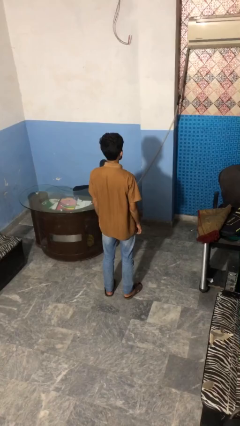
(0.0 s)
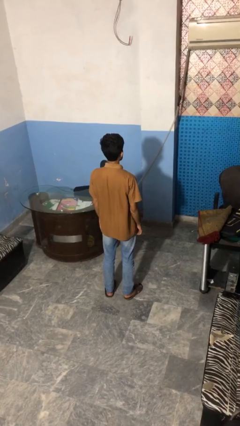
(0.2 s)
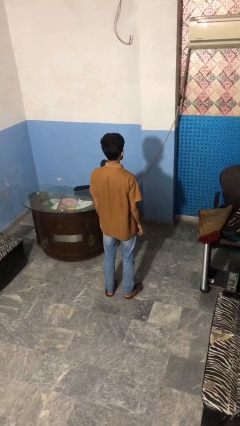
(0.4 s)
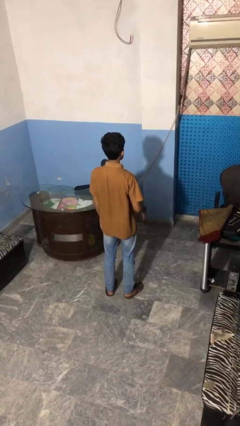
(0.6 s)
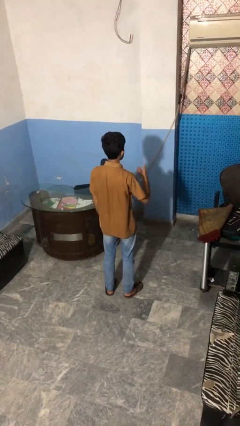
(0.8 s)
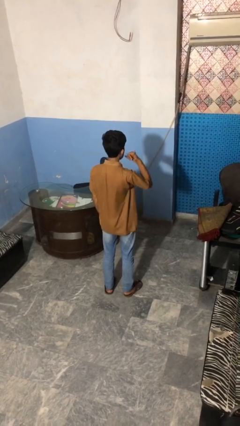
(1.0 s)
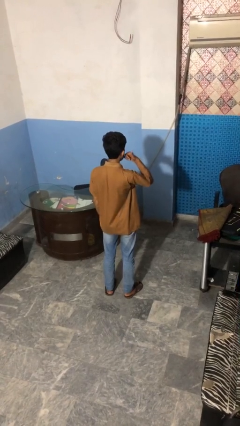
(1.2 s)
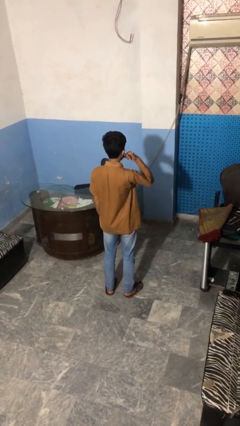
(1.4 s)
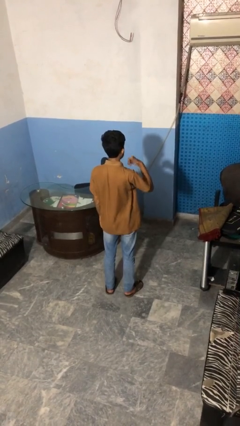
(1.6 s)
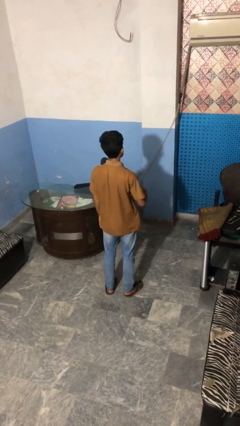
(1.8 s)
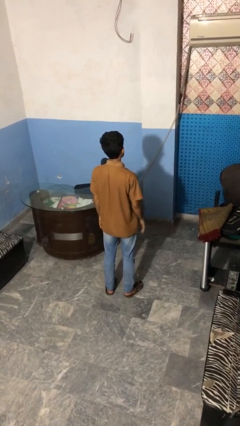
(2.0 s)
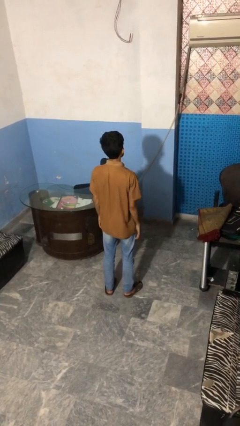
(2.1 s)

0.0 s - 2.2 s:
person gestures call me

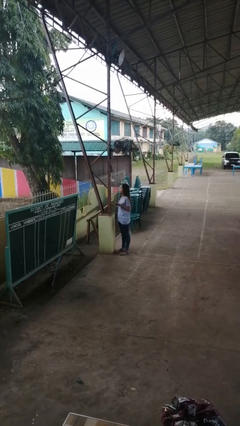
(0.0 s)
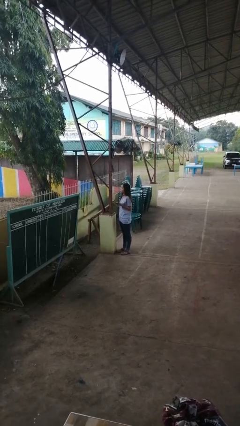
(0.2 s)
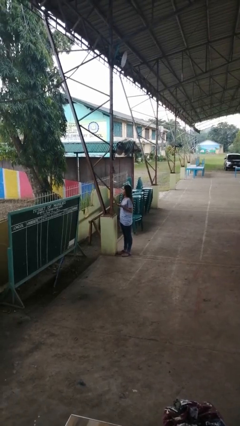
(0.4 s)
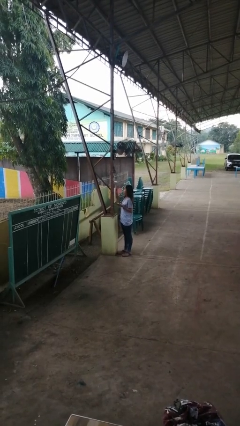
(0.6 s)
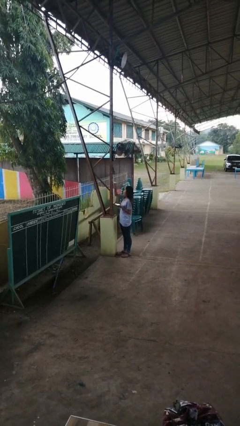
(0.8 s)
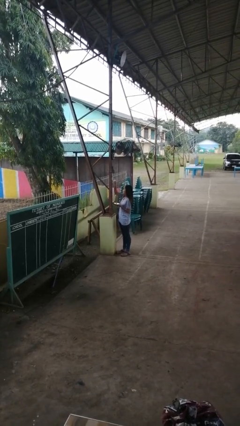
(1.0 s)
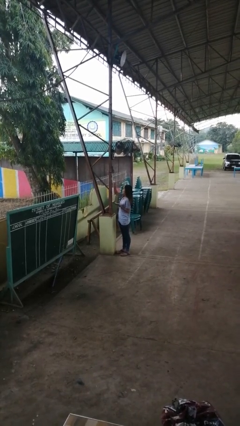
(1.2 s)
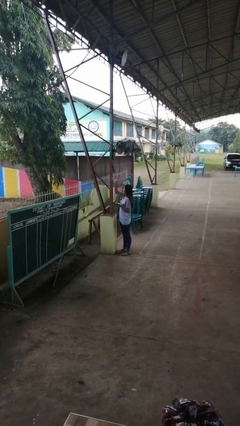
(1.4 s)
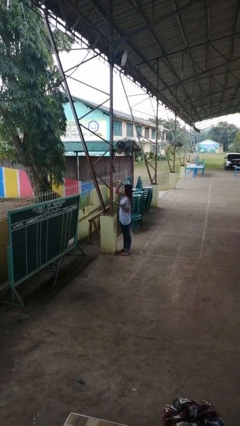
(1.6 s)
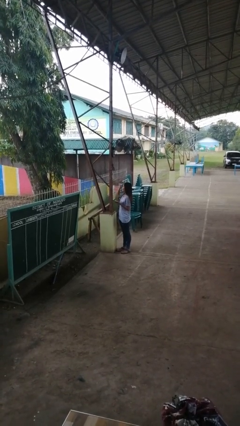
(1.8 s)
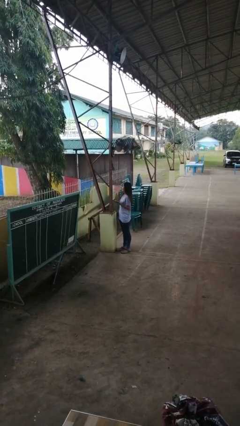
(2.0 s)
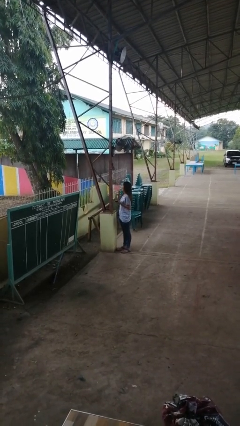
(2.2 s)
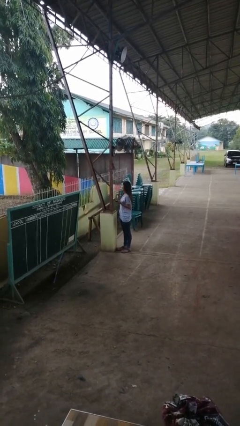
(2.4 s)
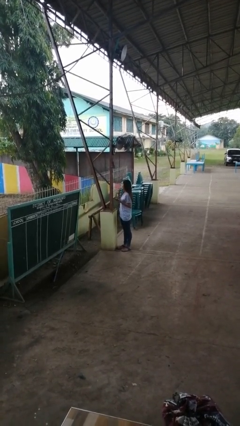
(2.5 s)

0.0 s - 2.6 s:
person unplugs from electrical socket

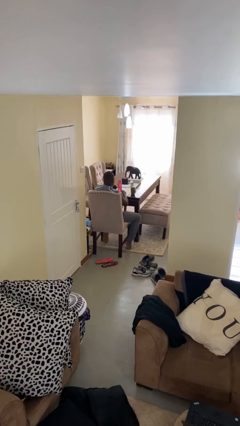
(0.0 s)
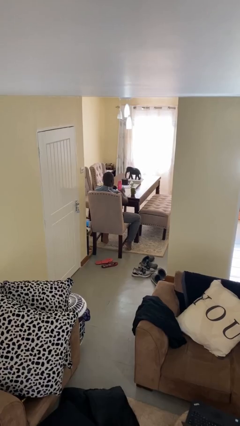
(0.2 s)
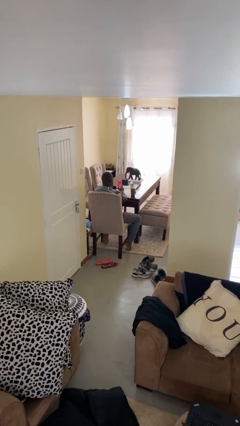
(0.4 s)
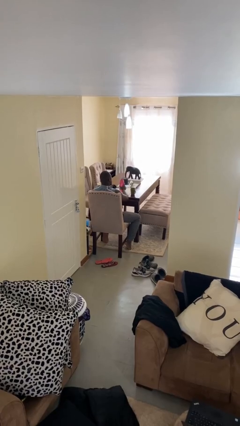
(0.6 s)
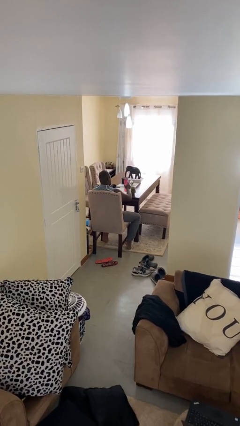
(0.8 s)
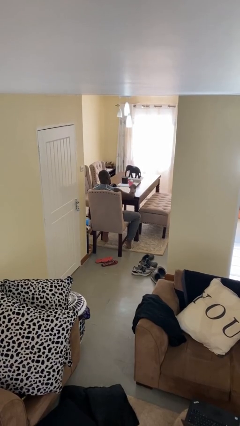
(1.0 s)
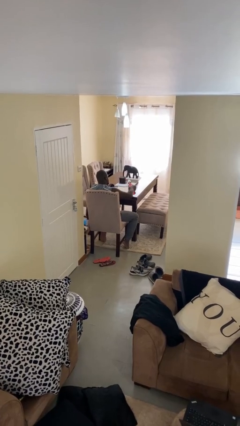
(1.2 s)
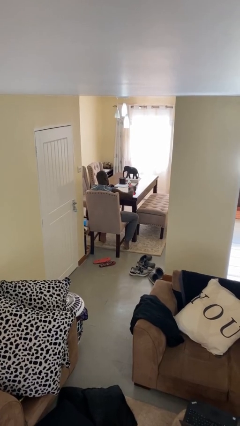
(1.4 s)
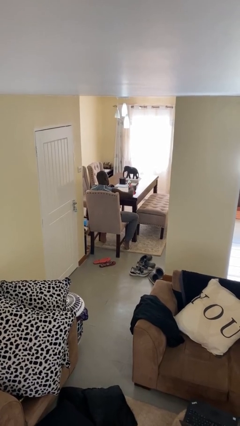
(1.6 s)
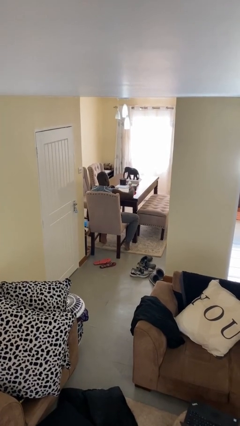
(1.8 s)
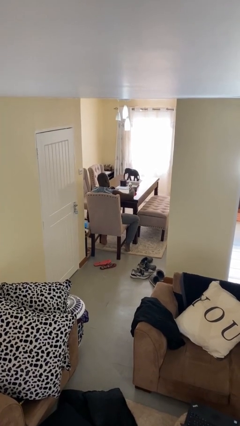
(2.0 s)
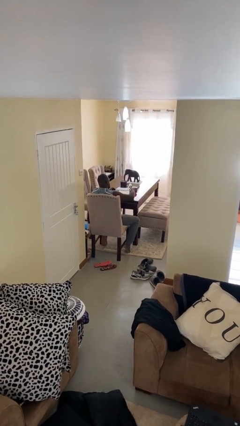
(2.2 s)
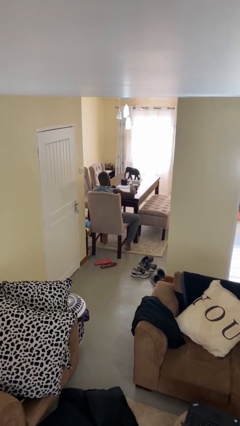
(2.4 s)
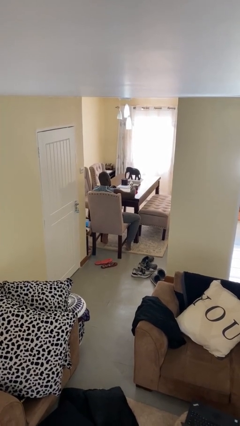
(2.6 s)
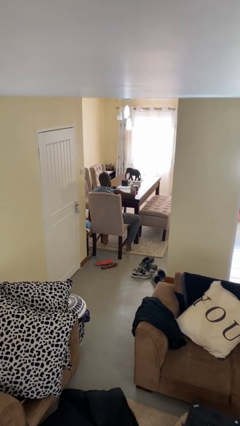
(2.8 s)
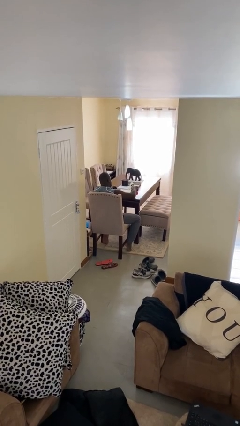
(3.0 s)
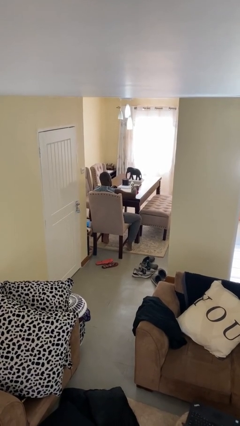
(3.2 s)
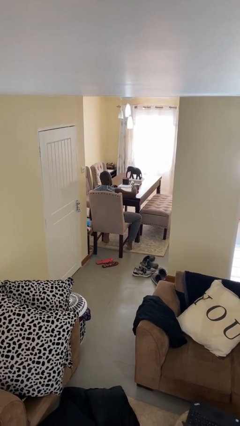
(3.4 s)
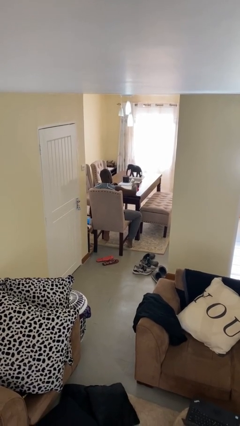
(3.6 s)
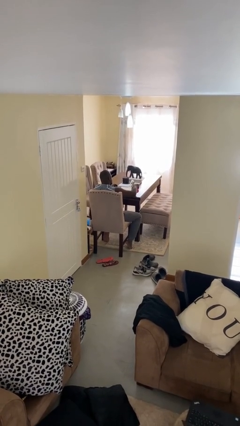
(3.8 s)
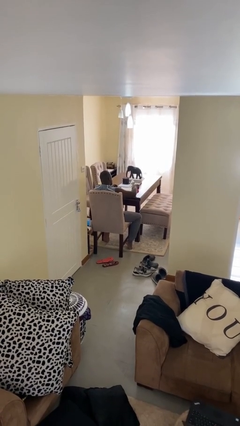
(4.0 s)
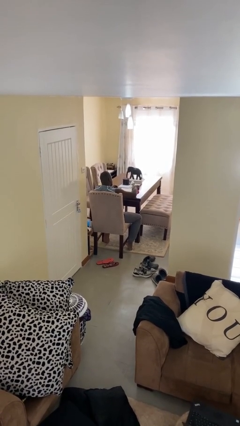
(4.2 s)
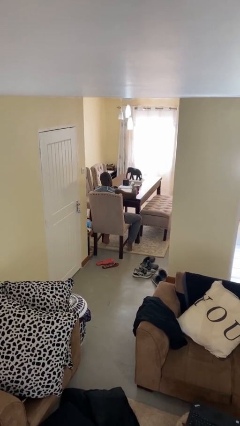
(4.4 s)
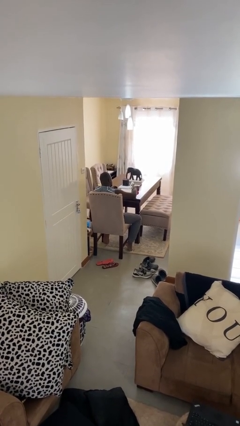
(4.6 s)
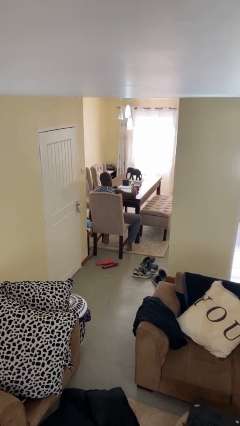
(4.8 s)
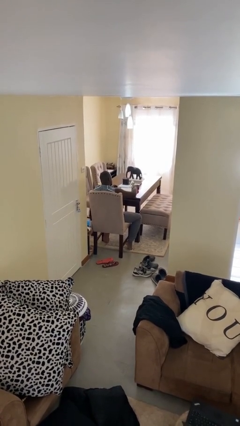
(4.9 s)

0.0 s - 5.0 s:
person pours liquid into cup

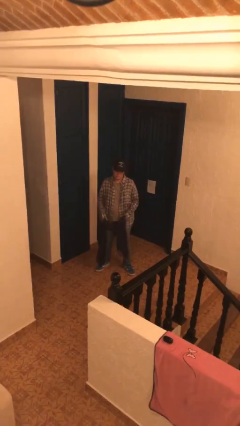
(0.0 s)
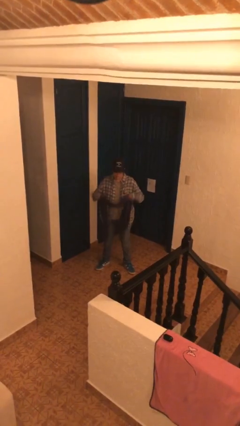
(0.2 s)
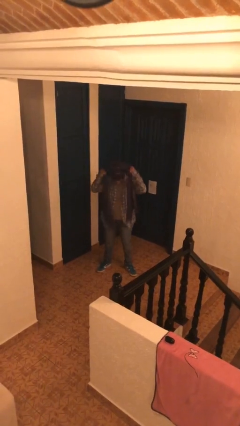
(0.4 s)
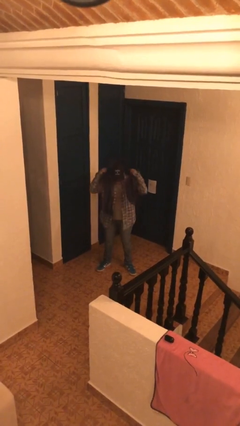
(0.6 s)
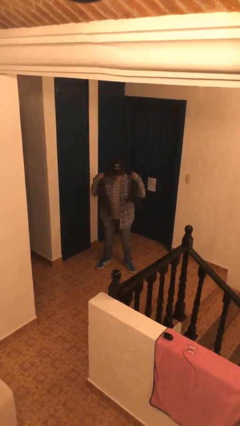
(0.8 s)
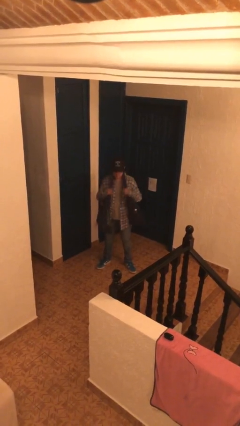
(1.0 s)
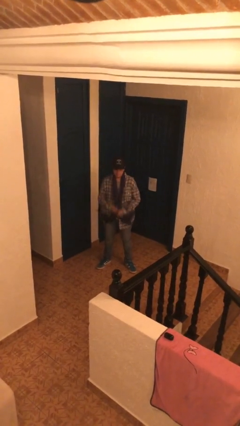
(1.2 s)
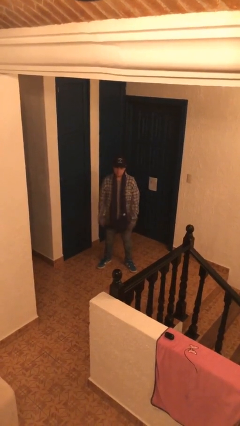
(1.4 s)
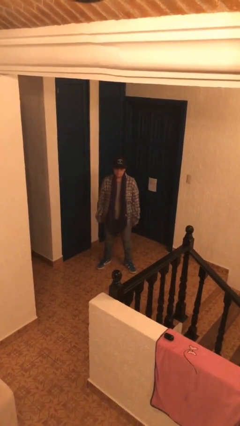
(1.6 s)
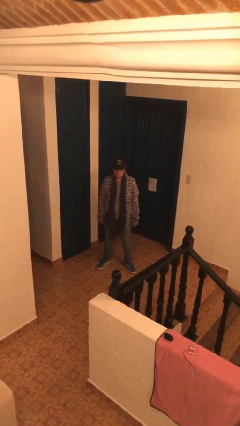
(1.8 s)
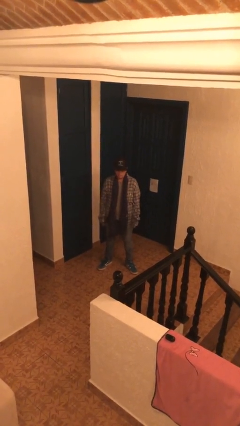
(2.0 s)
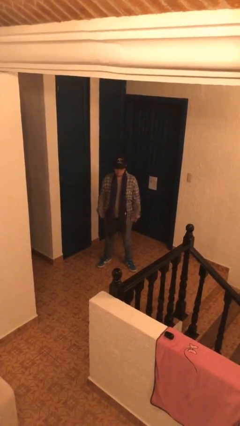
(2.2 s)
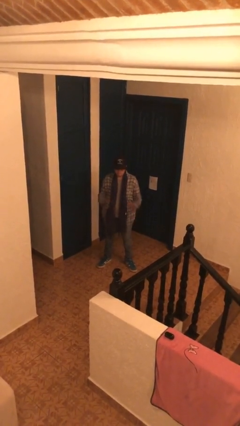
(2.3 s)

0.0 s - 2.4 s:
person puts on scarf

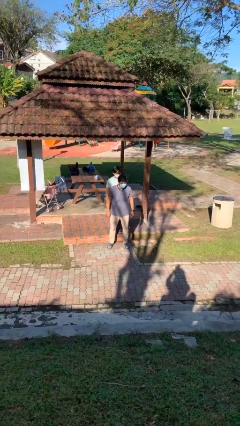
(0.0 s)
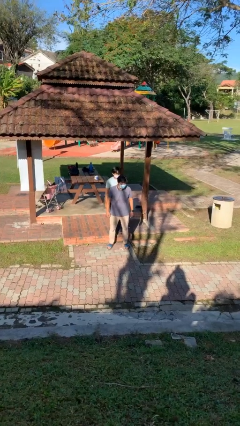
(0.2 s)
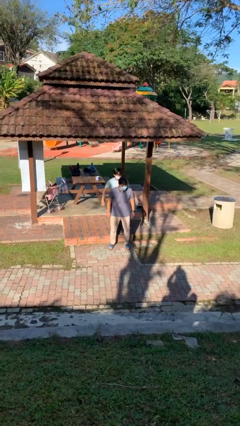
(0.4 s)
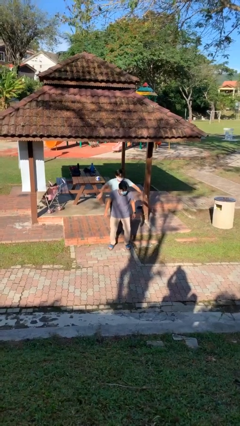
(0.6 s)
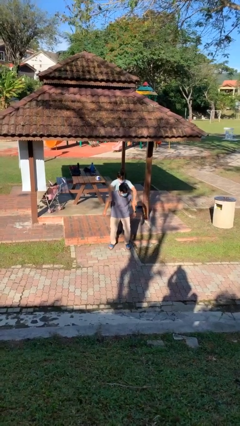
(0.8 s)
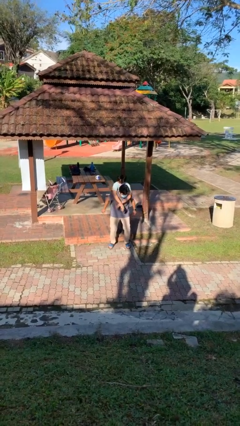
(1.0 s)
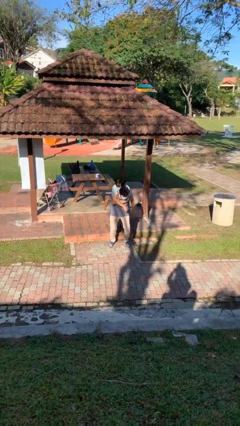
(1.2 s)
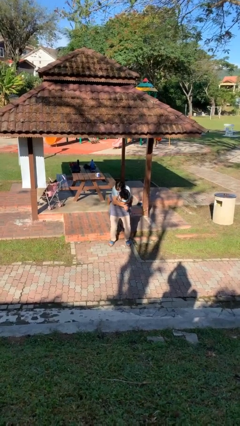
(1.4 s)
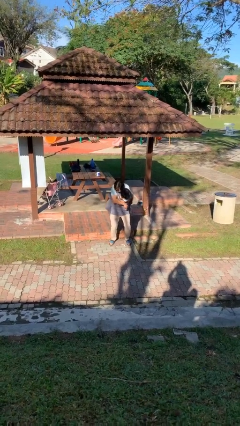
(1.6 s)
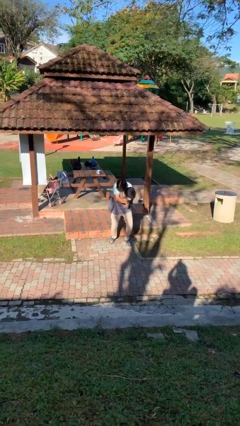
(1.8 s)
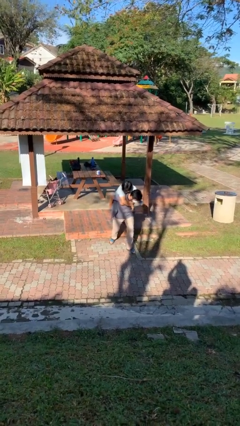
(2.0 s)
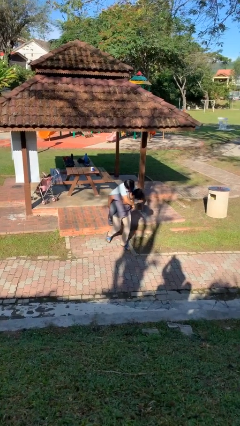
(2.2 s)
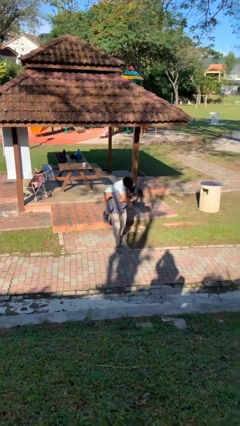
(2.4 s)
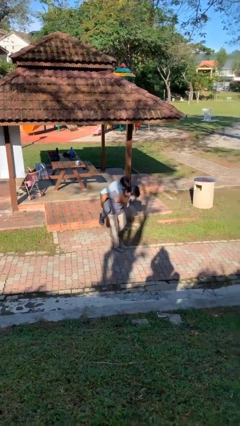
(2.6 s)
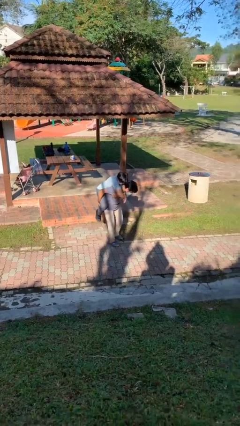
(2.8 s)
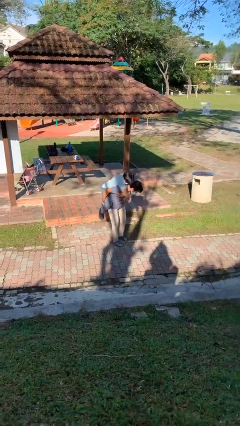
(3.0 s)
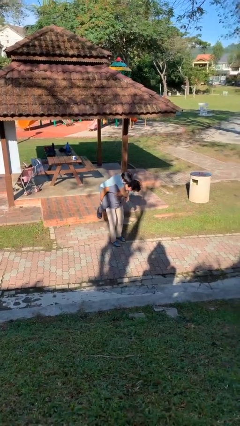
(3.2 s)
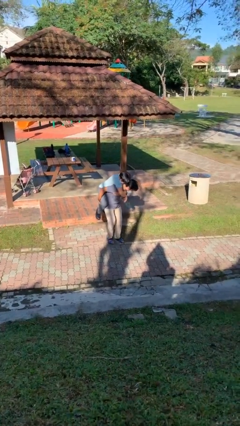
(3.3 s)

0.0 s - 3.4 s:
person carries person over shoulder

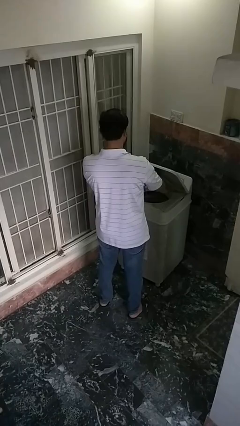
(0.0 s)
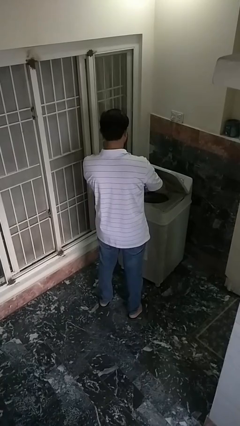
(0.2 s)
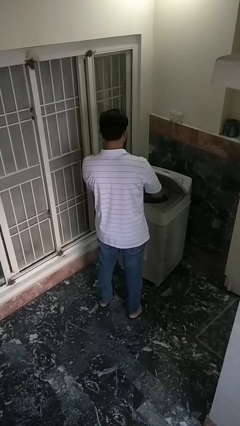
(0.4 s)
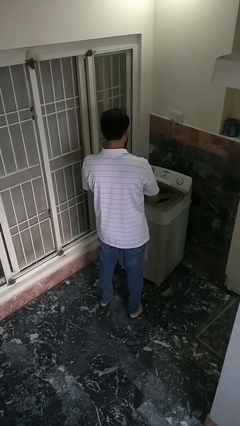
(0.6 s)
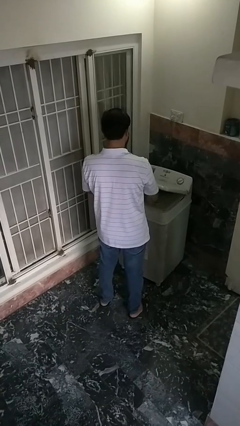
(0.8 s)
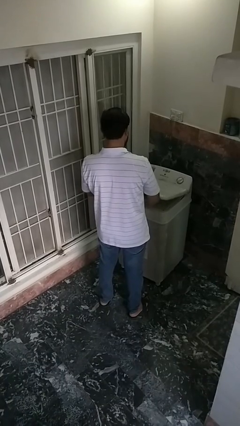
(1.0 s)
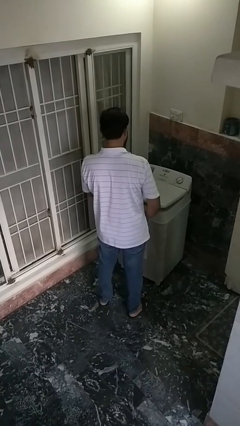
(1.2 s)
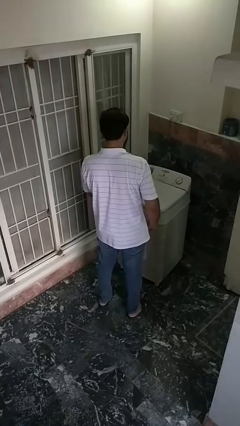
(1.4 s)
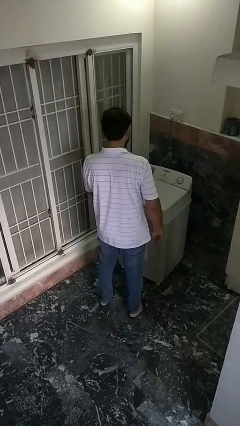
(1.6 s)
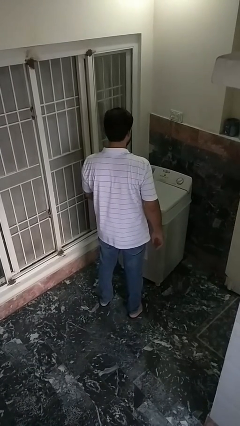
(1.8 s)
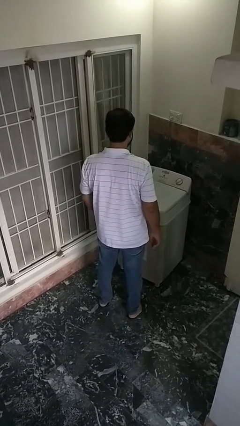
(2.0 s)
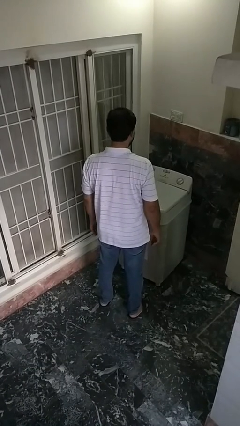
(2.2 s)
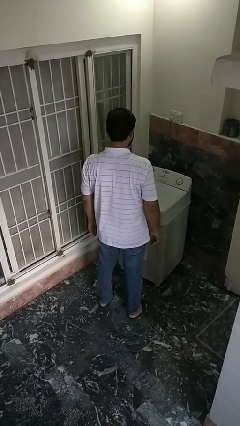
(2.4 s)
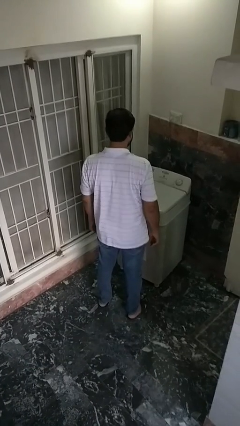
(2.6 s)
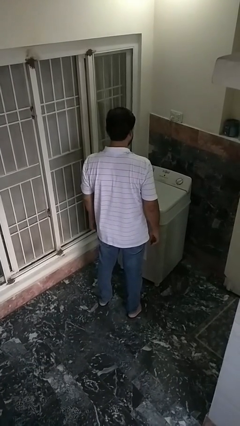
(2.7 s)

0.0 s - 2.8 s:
person closes clothes washer
